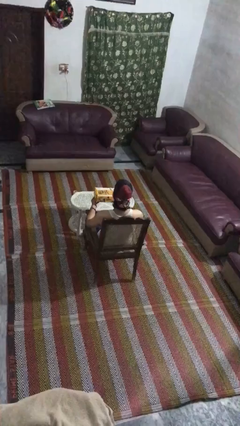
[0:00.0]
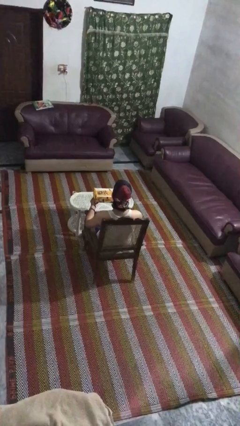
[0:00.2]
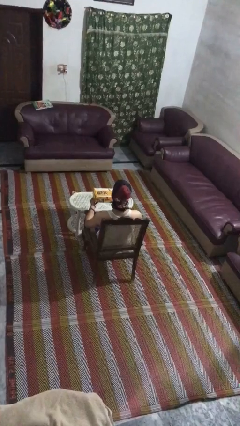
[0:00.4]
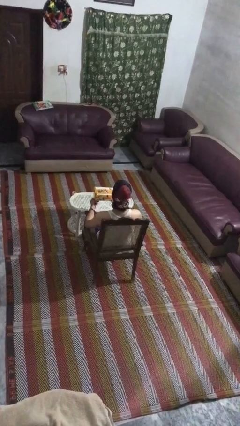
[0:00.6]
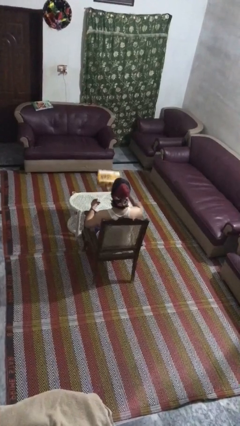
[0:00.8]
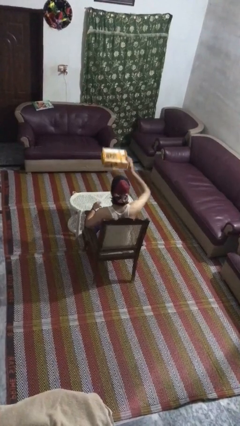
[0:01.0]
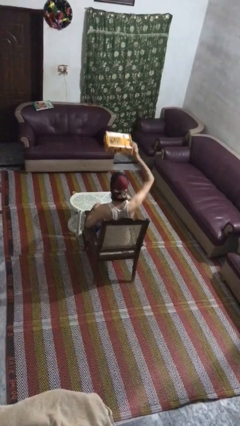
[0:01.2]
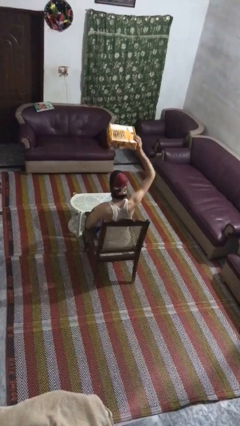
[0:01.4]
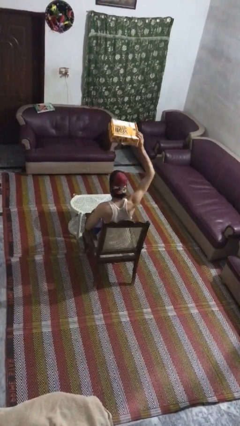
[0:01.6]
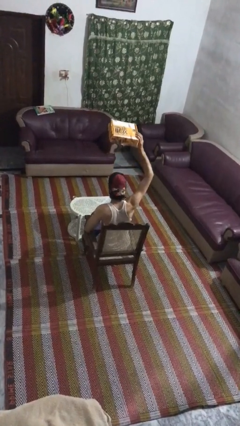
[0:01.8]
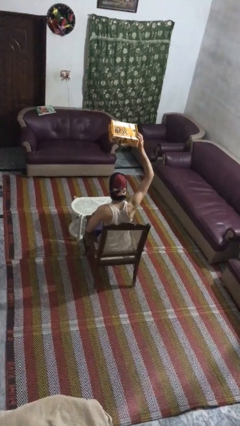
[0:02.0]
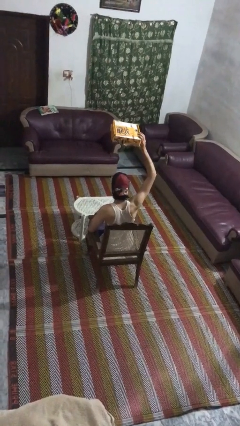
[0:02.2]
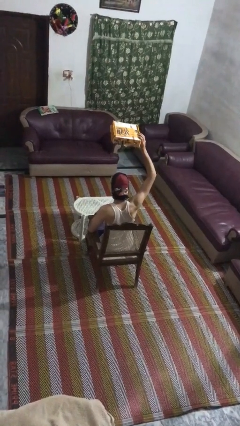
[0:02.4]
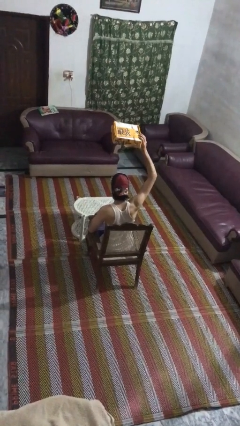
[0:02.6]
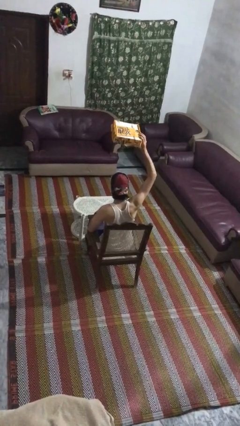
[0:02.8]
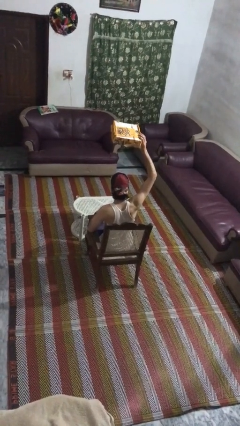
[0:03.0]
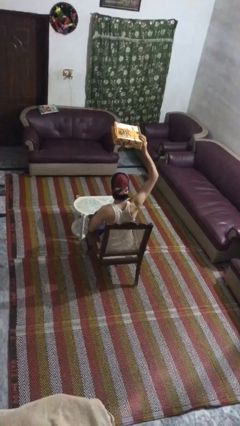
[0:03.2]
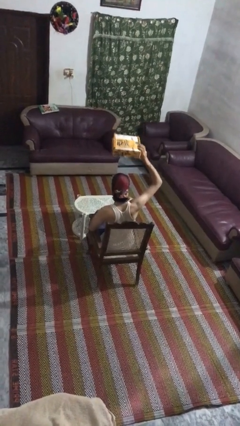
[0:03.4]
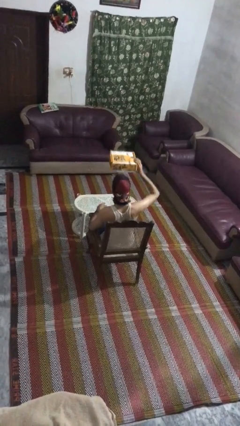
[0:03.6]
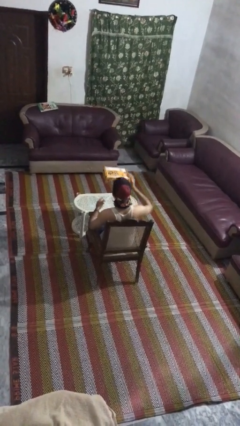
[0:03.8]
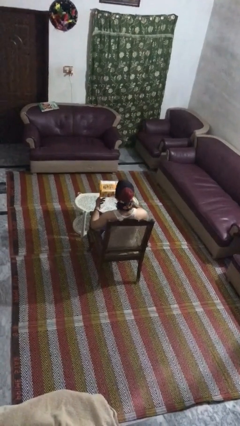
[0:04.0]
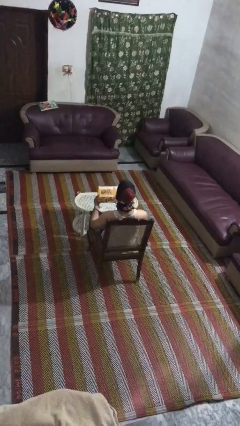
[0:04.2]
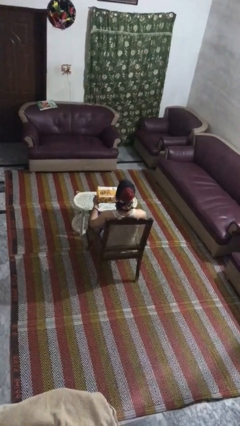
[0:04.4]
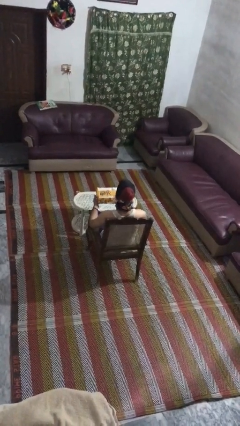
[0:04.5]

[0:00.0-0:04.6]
person holds object above head

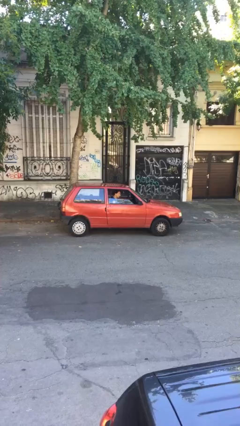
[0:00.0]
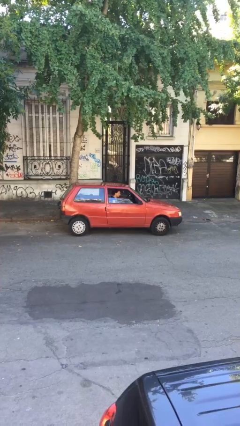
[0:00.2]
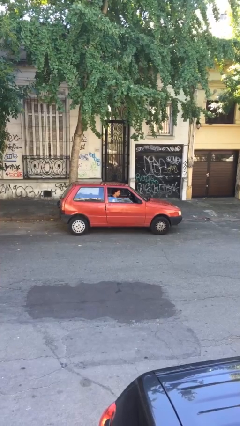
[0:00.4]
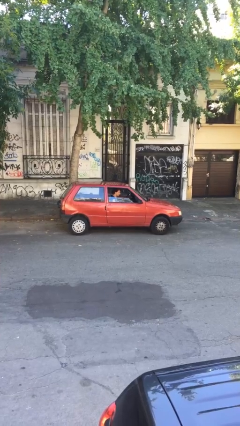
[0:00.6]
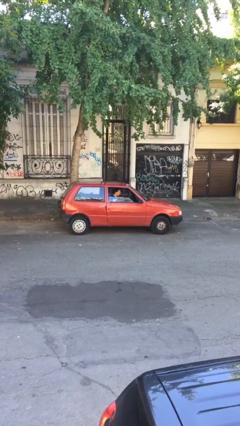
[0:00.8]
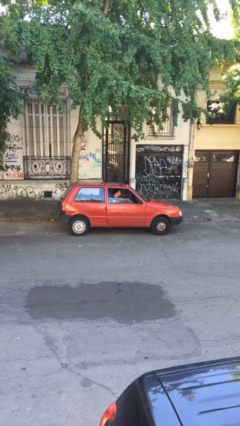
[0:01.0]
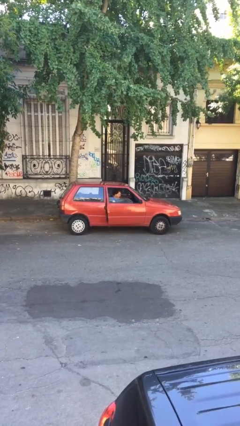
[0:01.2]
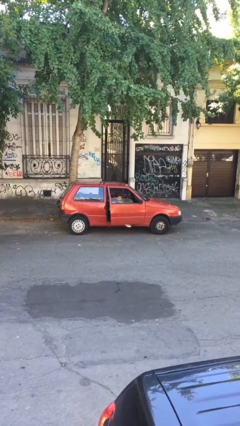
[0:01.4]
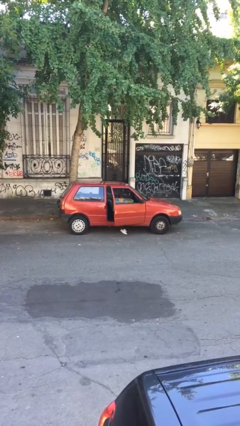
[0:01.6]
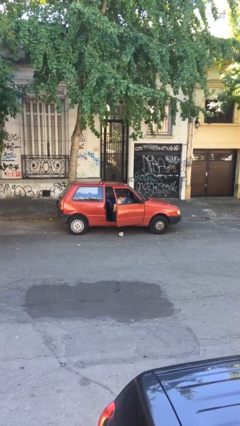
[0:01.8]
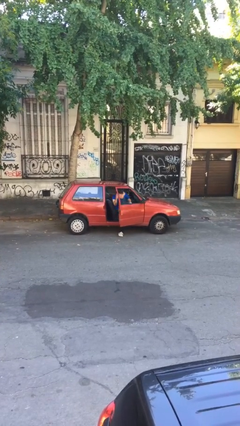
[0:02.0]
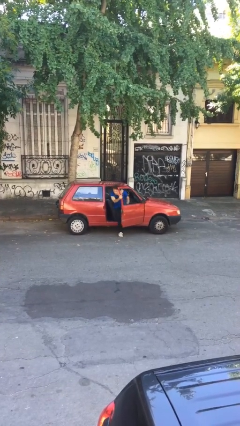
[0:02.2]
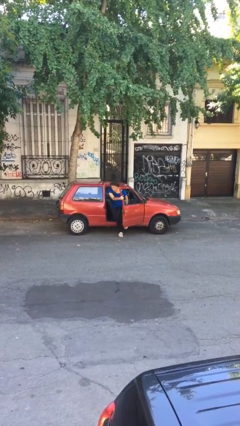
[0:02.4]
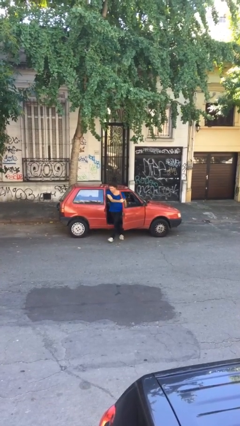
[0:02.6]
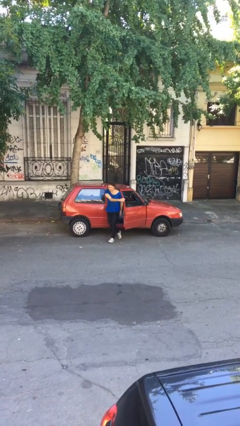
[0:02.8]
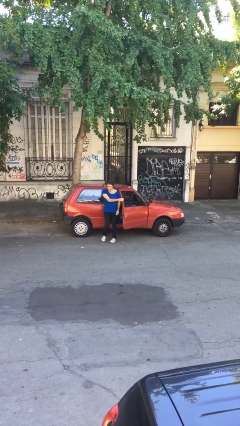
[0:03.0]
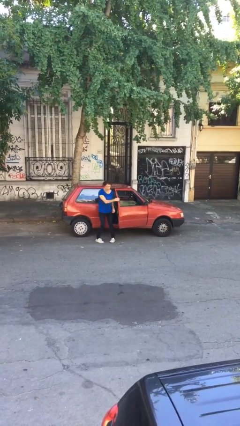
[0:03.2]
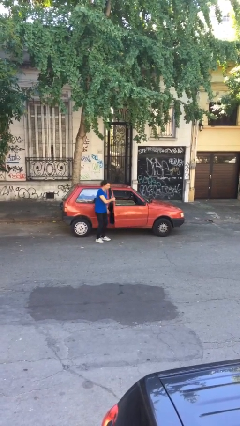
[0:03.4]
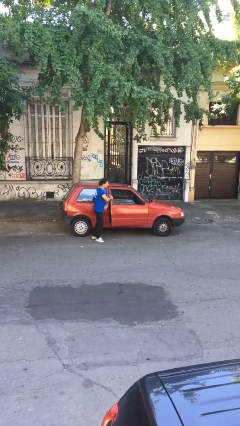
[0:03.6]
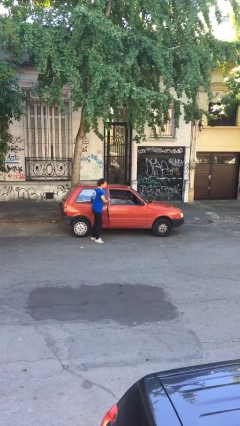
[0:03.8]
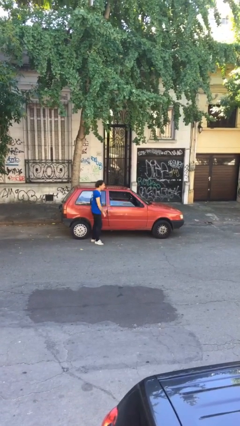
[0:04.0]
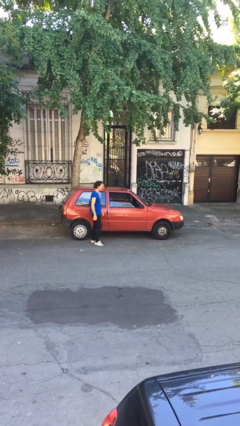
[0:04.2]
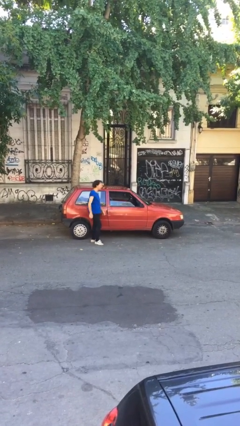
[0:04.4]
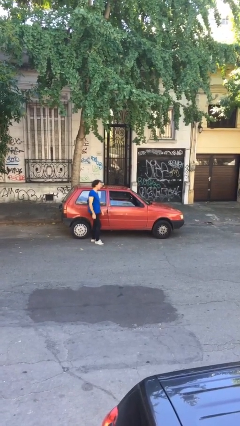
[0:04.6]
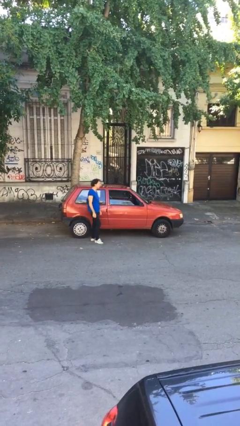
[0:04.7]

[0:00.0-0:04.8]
car drops off person

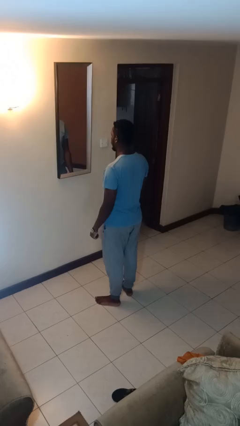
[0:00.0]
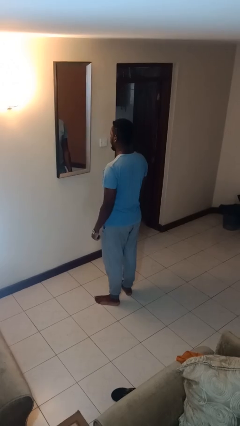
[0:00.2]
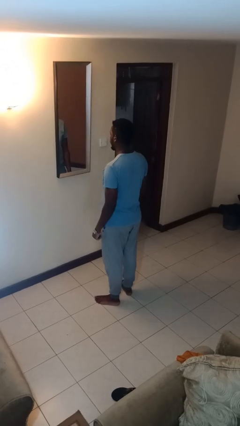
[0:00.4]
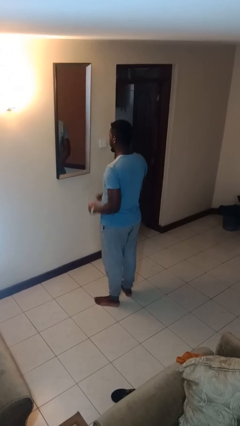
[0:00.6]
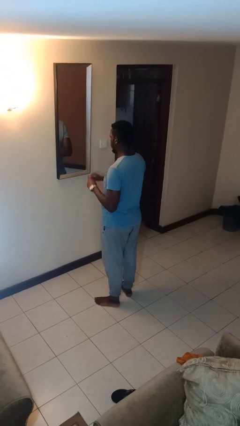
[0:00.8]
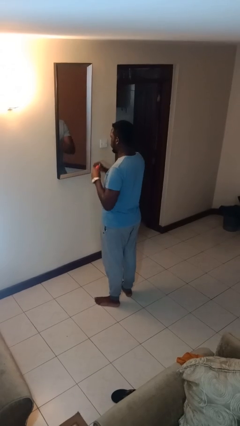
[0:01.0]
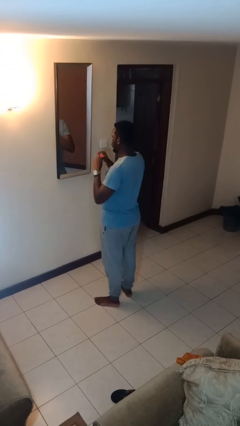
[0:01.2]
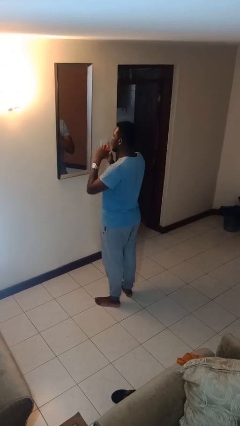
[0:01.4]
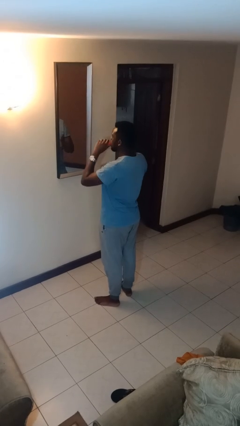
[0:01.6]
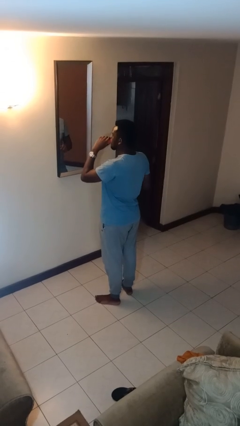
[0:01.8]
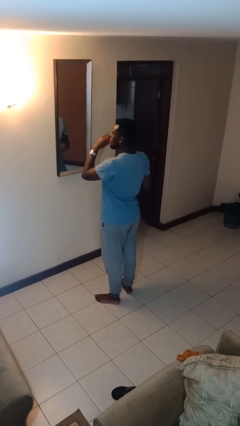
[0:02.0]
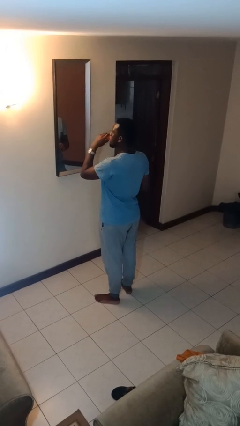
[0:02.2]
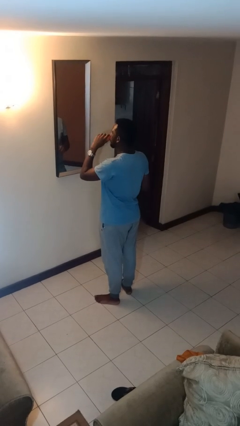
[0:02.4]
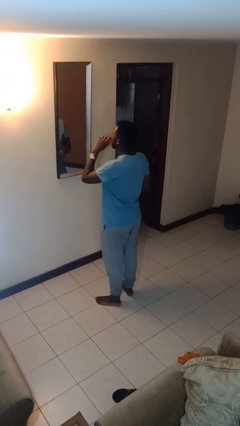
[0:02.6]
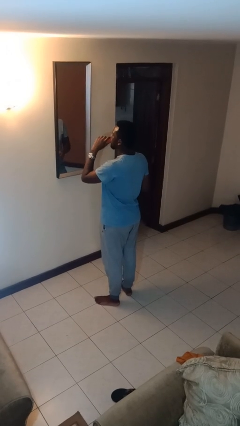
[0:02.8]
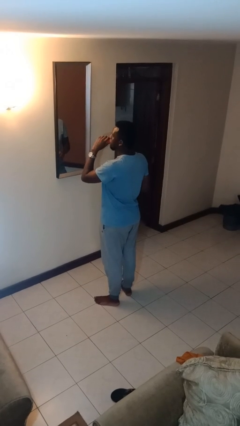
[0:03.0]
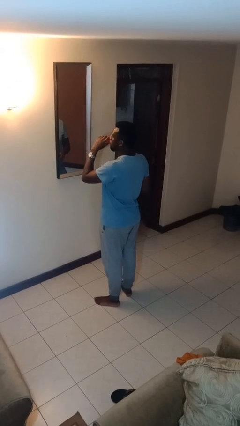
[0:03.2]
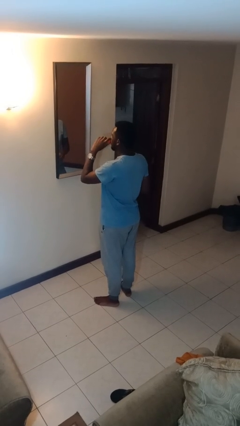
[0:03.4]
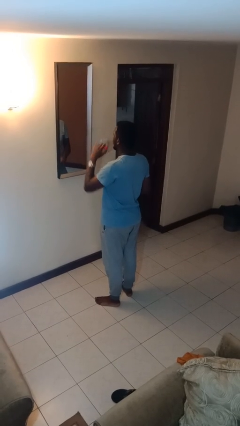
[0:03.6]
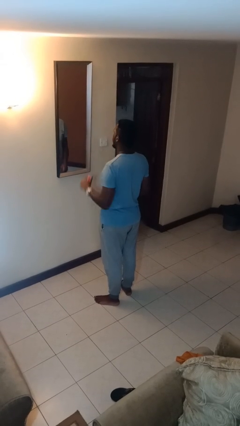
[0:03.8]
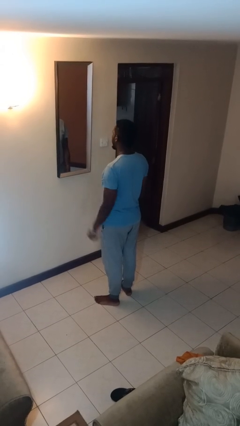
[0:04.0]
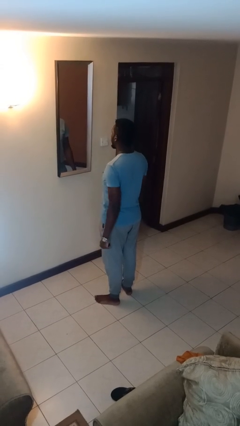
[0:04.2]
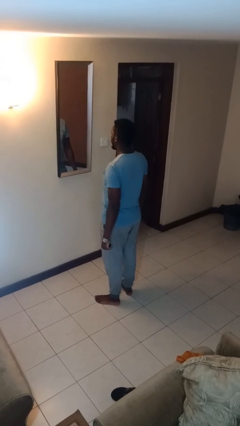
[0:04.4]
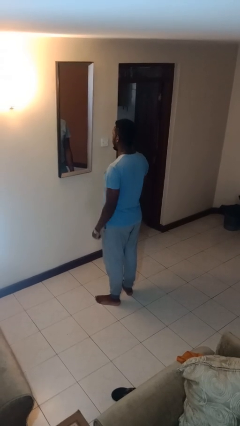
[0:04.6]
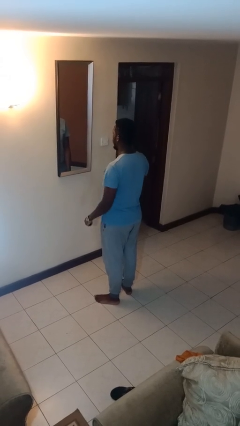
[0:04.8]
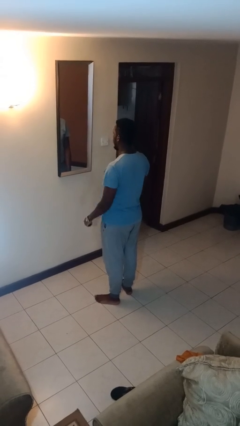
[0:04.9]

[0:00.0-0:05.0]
person applies lip makeup

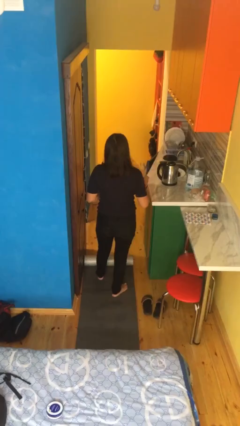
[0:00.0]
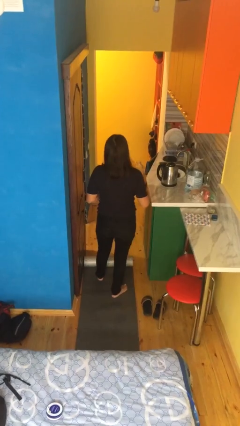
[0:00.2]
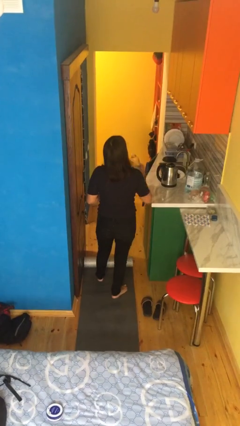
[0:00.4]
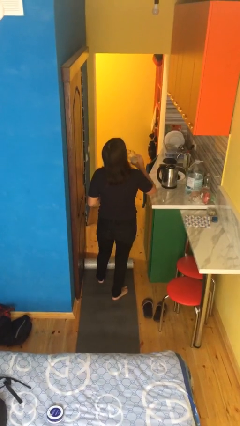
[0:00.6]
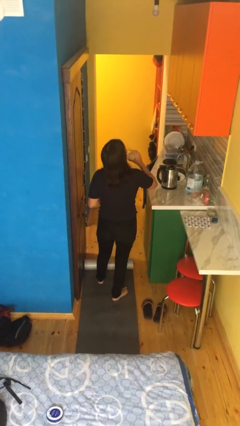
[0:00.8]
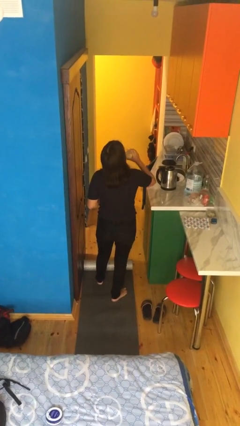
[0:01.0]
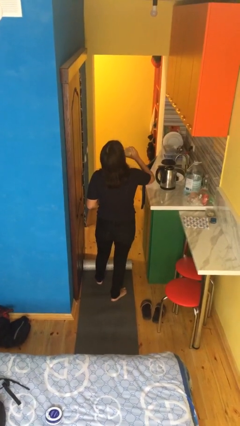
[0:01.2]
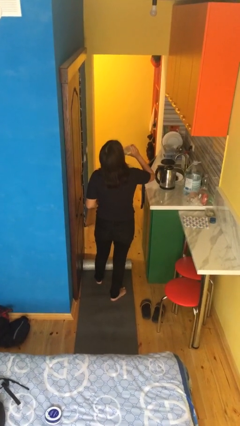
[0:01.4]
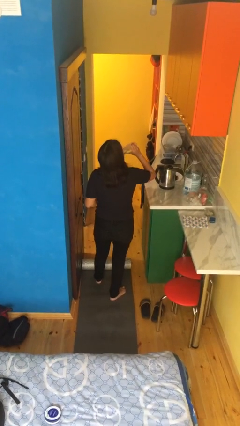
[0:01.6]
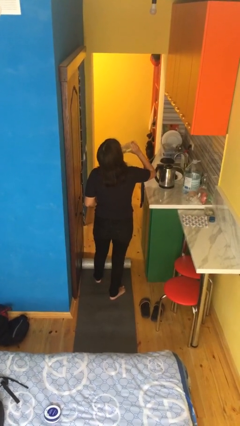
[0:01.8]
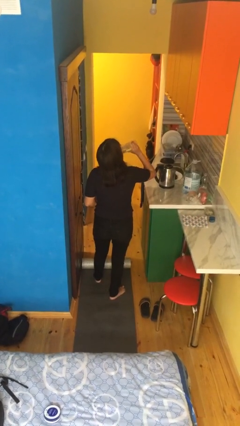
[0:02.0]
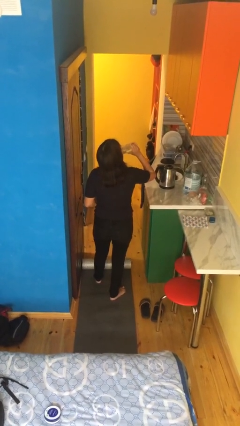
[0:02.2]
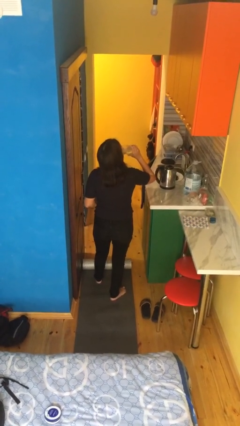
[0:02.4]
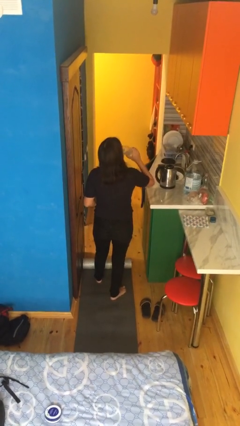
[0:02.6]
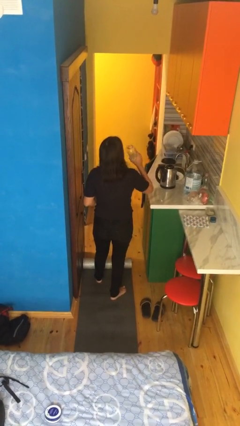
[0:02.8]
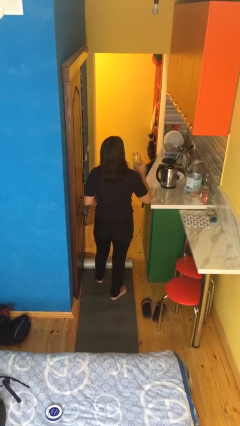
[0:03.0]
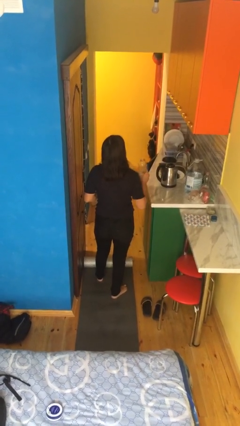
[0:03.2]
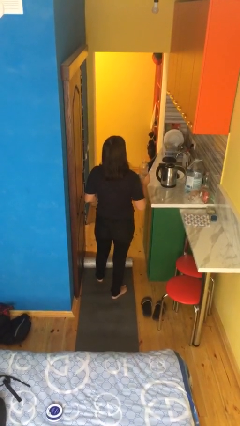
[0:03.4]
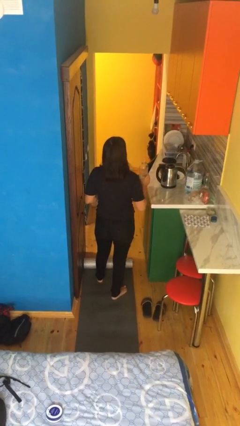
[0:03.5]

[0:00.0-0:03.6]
person drinks from bottle

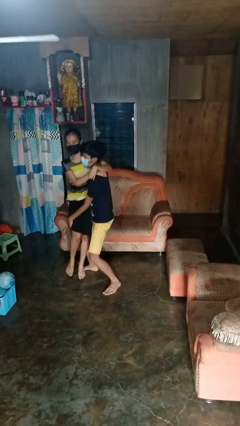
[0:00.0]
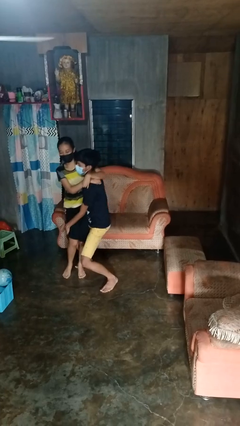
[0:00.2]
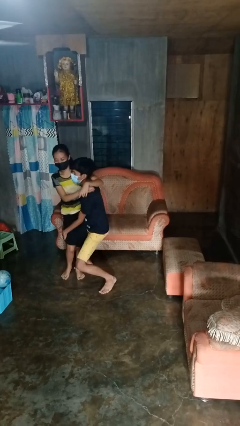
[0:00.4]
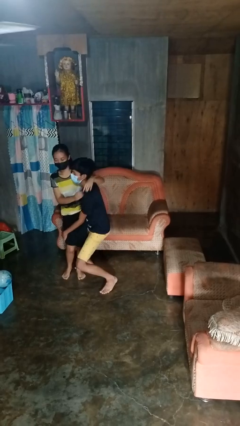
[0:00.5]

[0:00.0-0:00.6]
person puts down person
